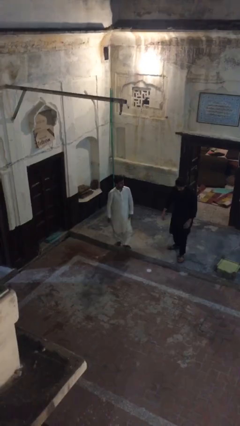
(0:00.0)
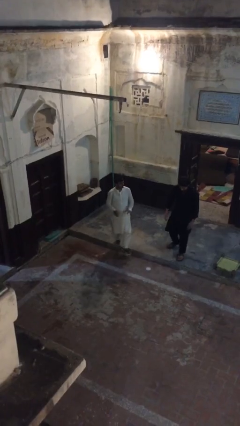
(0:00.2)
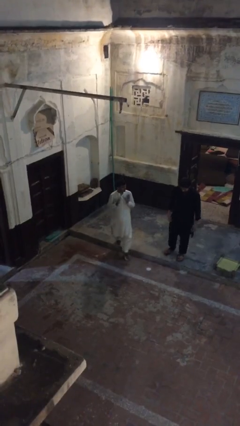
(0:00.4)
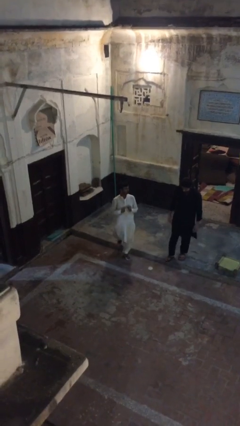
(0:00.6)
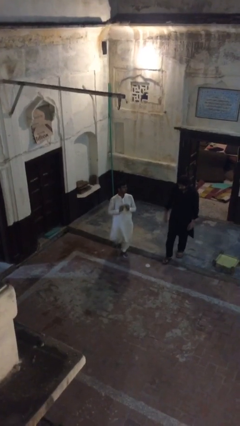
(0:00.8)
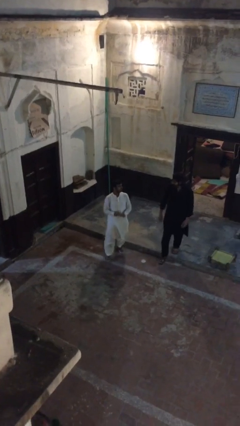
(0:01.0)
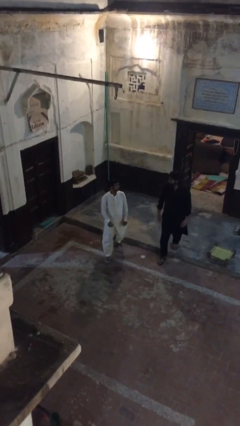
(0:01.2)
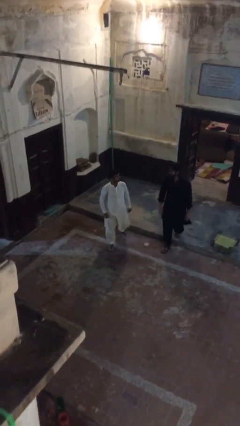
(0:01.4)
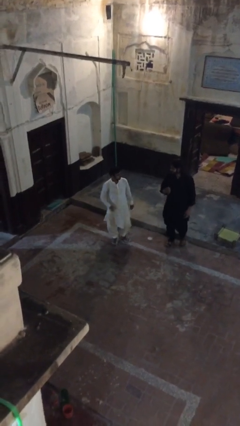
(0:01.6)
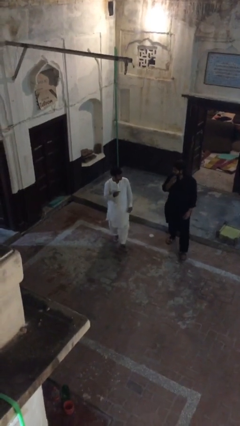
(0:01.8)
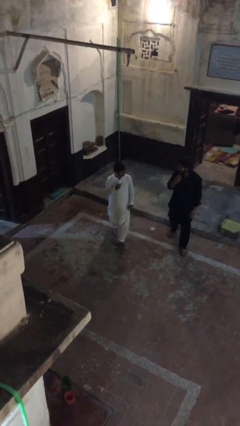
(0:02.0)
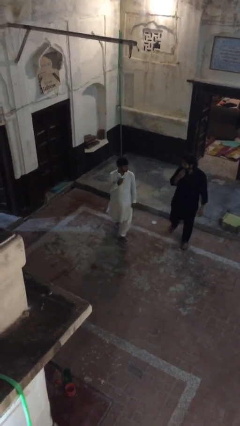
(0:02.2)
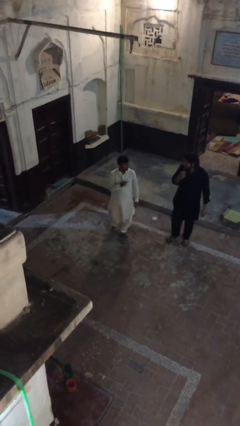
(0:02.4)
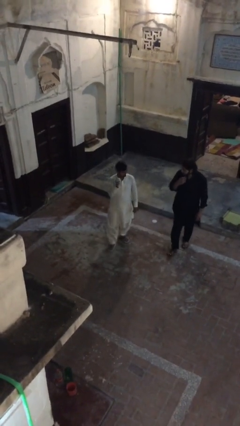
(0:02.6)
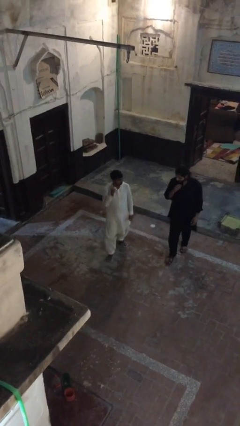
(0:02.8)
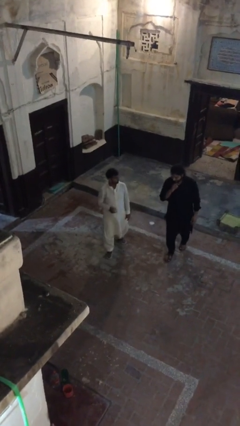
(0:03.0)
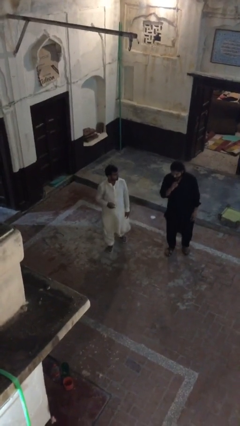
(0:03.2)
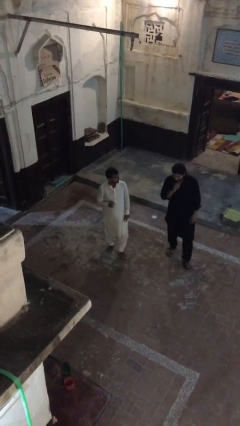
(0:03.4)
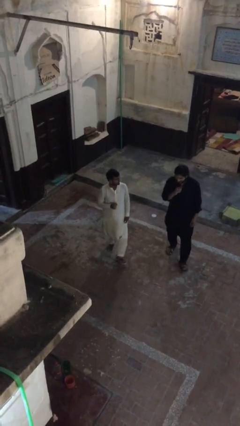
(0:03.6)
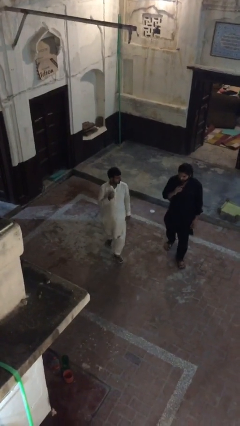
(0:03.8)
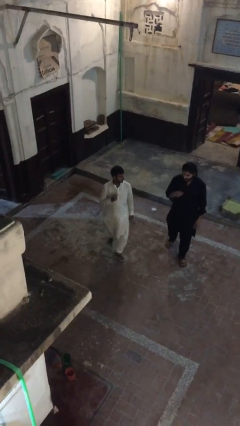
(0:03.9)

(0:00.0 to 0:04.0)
person talks to person

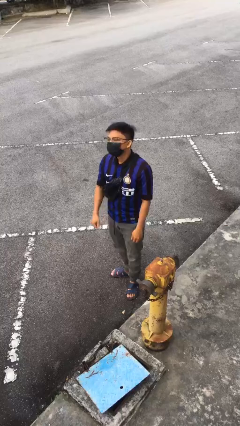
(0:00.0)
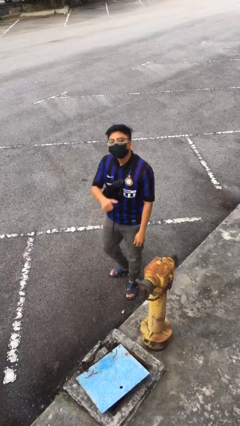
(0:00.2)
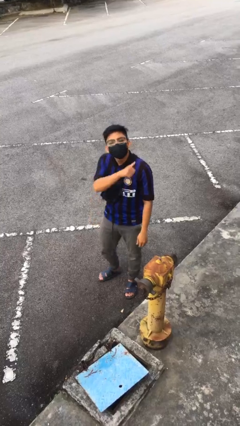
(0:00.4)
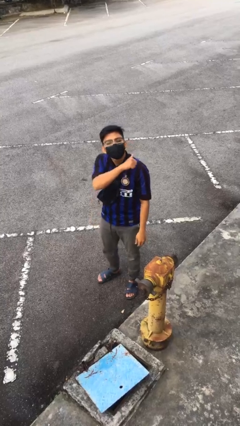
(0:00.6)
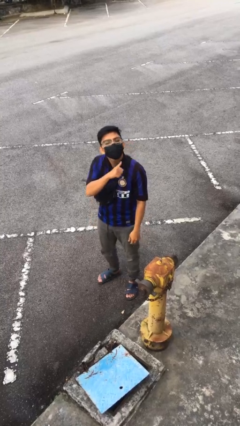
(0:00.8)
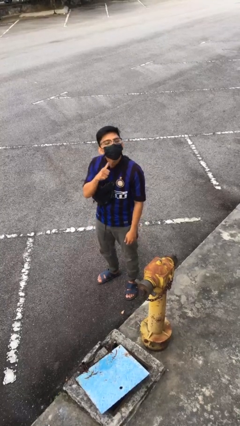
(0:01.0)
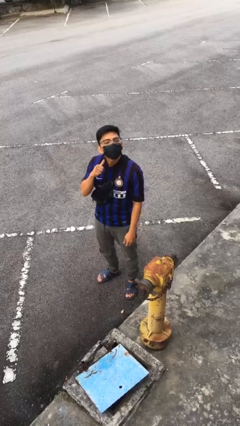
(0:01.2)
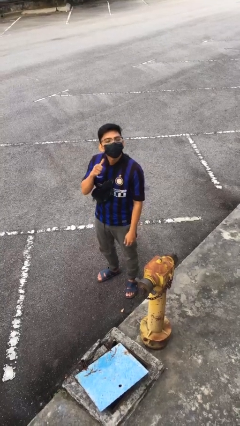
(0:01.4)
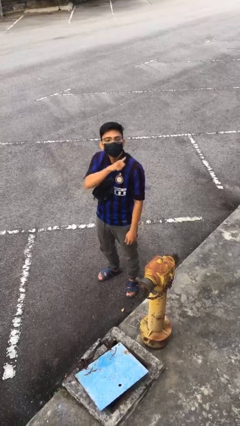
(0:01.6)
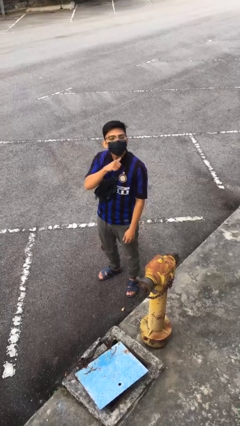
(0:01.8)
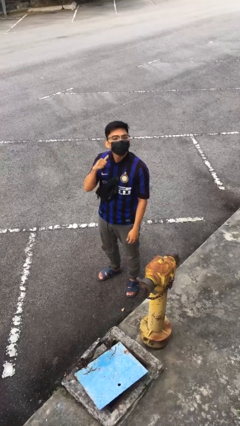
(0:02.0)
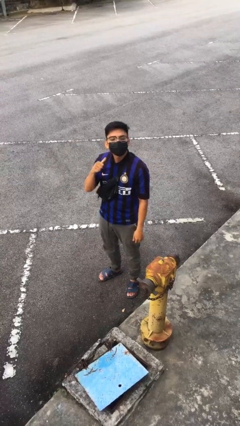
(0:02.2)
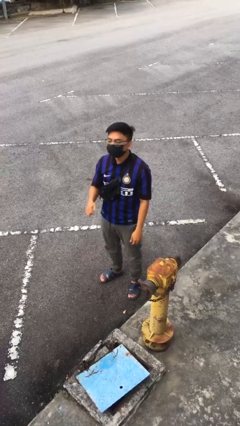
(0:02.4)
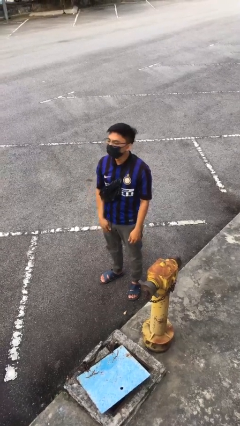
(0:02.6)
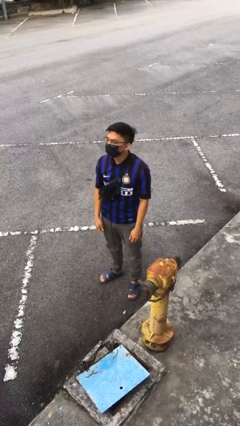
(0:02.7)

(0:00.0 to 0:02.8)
person gestures cut

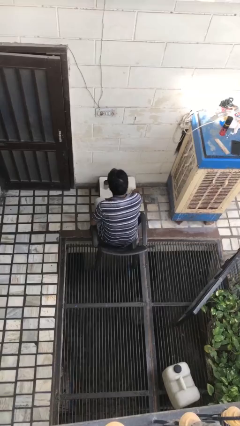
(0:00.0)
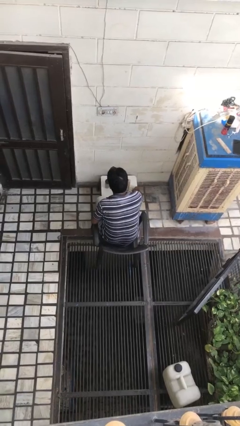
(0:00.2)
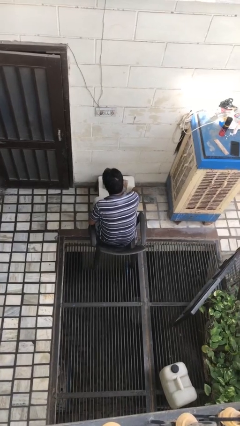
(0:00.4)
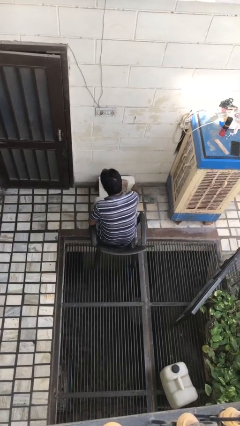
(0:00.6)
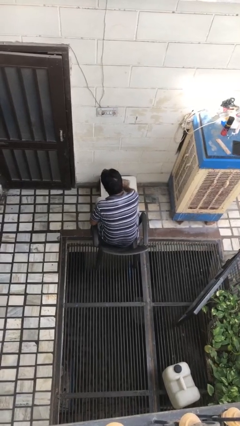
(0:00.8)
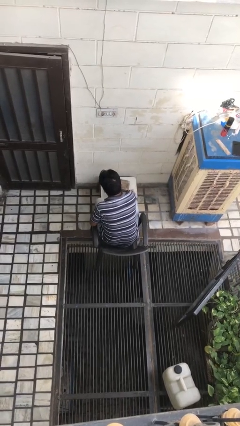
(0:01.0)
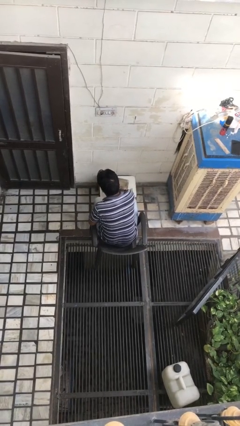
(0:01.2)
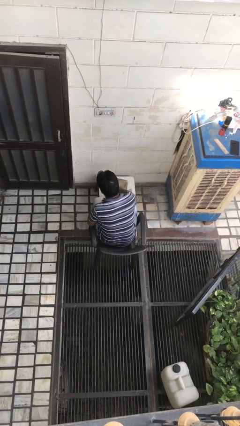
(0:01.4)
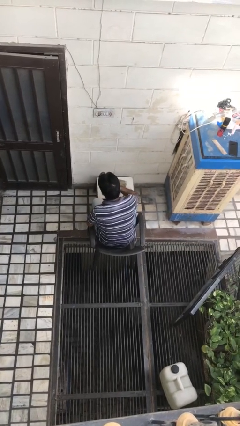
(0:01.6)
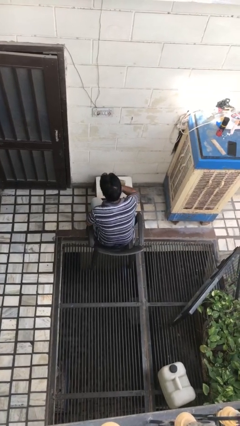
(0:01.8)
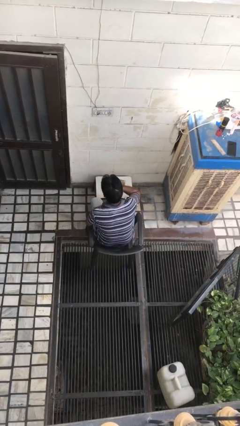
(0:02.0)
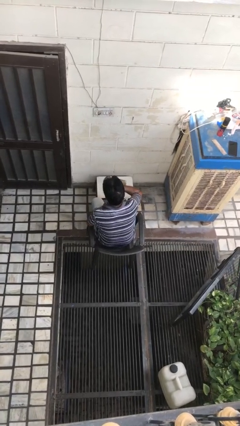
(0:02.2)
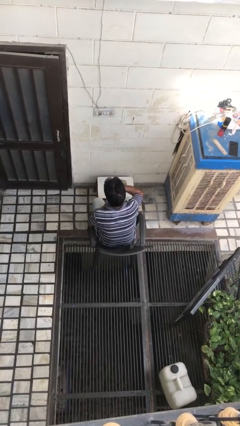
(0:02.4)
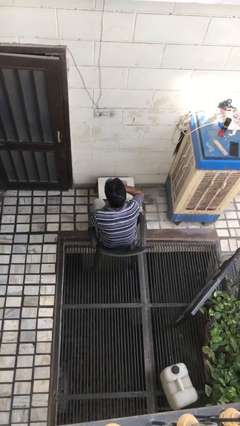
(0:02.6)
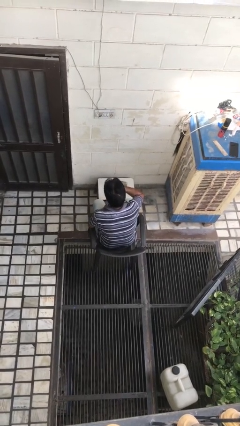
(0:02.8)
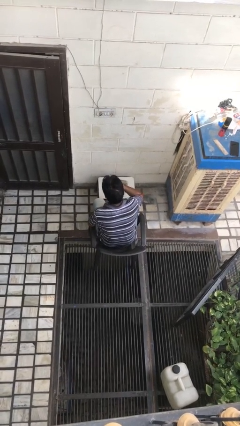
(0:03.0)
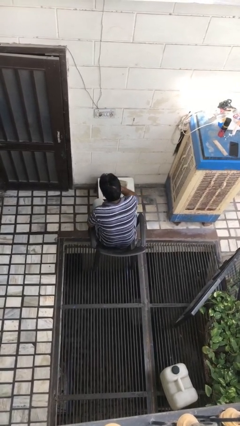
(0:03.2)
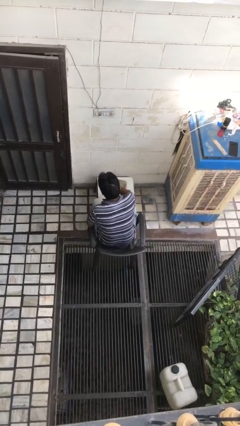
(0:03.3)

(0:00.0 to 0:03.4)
person drinks from cup

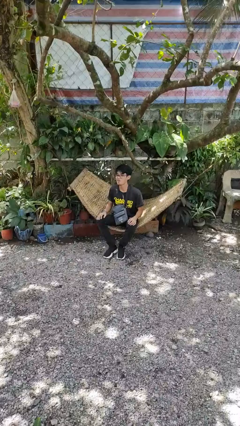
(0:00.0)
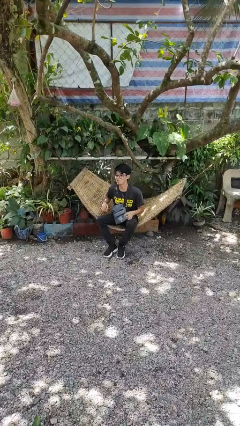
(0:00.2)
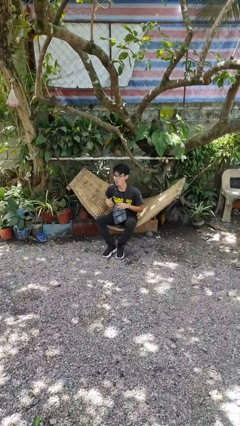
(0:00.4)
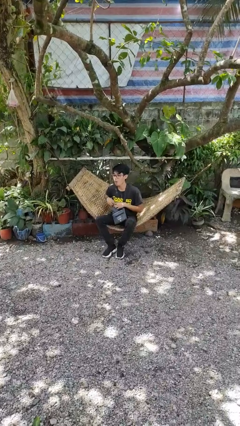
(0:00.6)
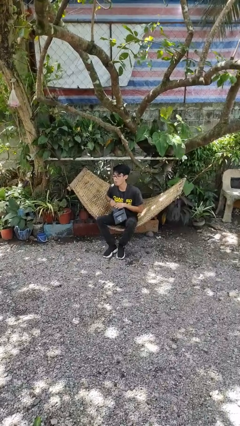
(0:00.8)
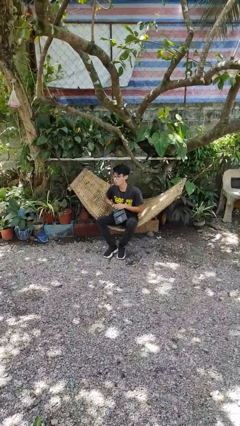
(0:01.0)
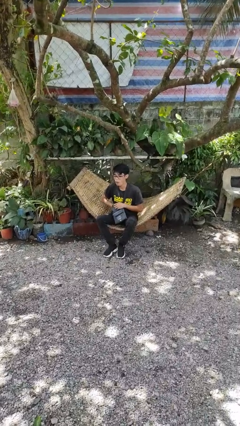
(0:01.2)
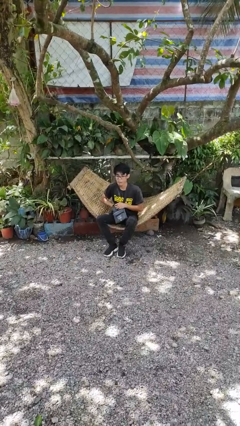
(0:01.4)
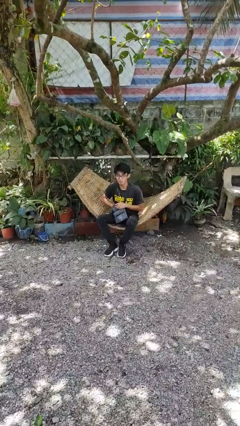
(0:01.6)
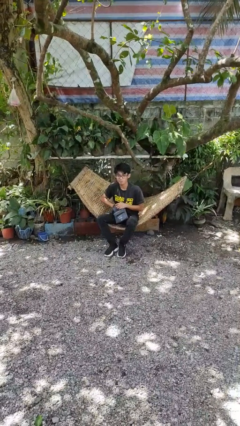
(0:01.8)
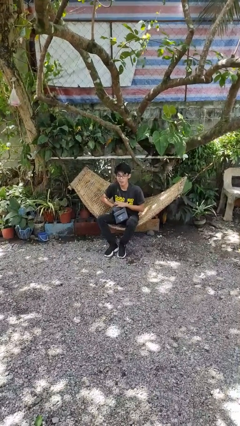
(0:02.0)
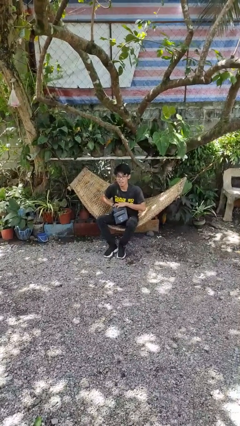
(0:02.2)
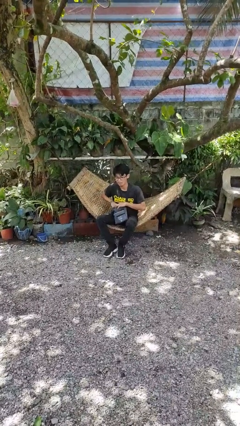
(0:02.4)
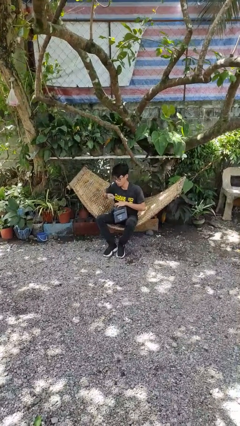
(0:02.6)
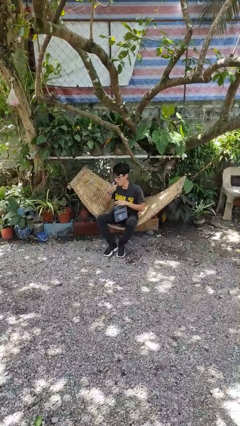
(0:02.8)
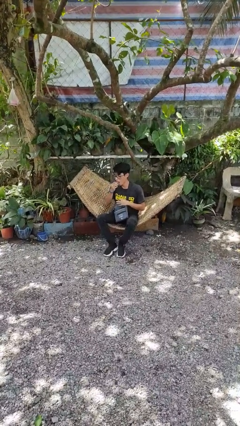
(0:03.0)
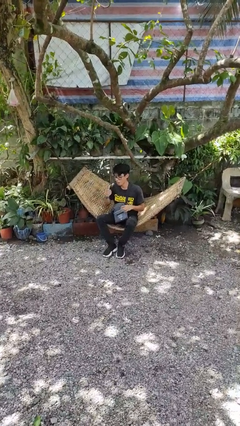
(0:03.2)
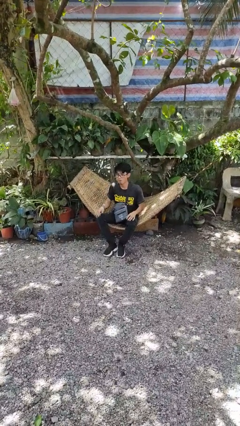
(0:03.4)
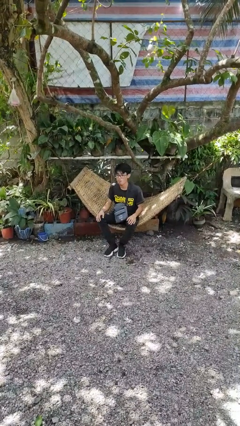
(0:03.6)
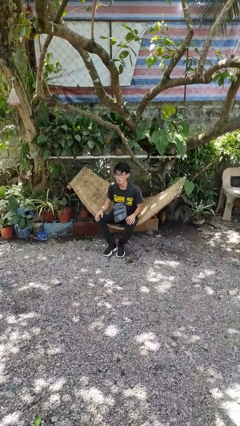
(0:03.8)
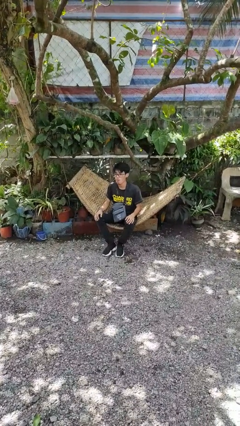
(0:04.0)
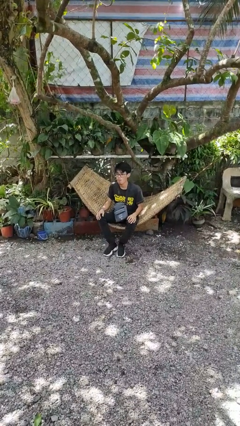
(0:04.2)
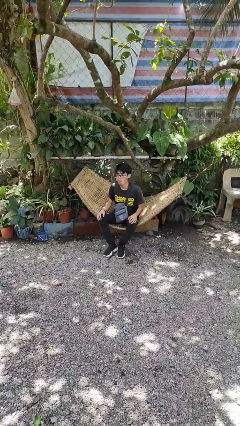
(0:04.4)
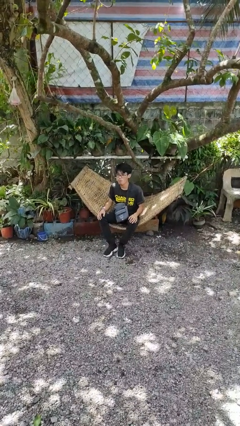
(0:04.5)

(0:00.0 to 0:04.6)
person eats snack from bag

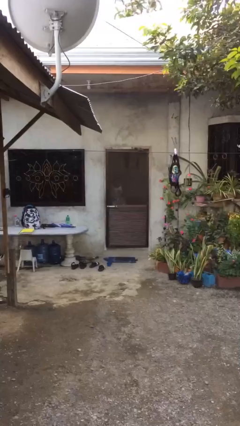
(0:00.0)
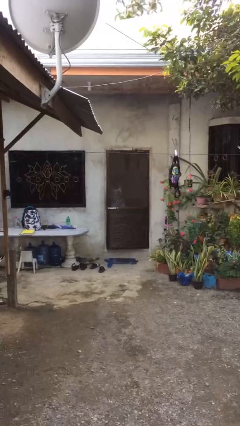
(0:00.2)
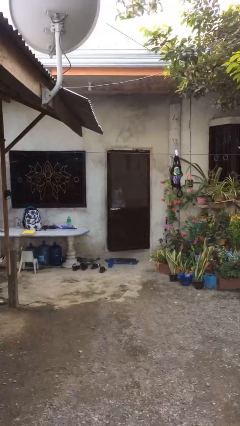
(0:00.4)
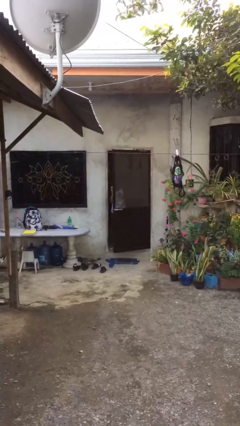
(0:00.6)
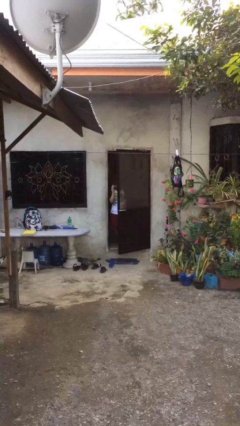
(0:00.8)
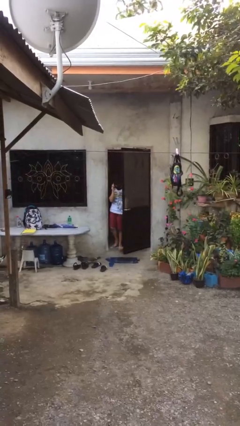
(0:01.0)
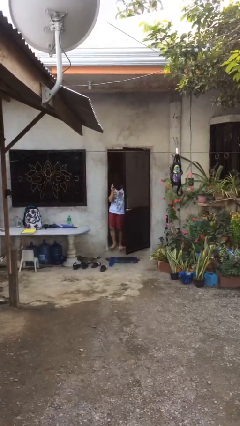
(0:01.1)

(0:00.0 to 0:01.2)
person opens facility door

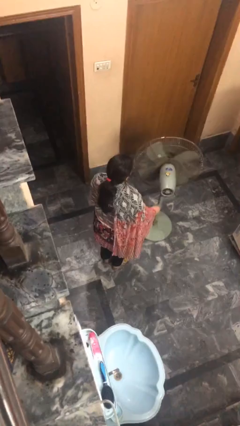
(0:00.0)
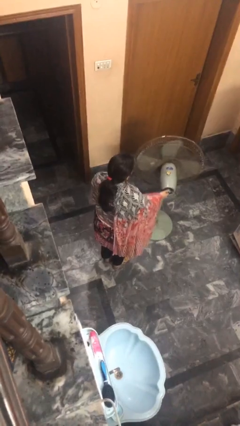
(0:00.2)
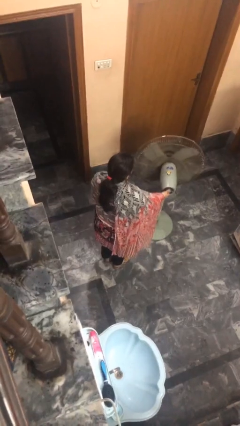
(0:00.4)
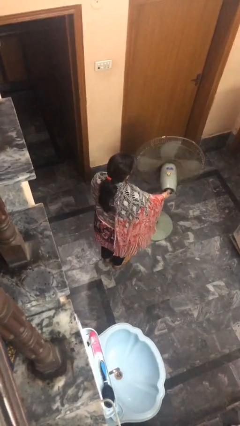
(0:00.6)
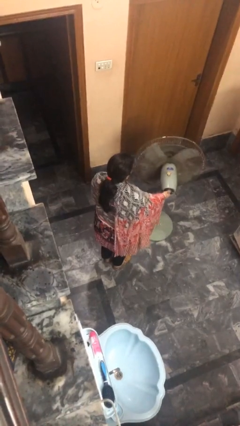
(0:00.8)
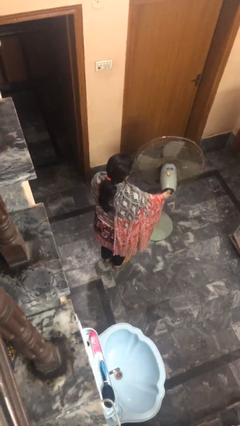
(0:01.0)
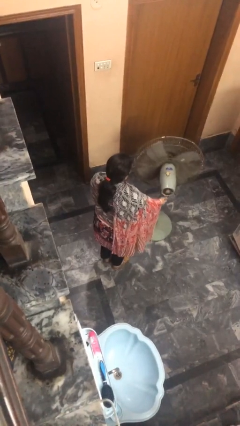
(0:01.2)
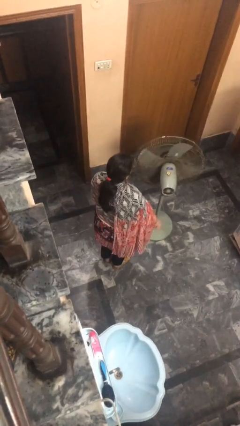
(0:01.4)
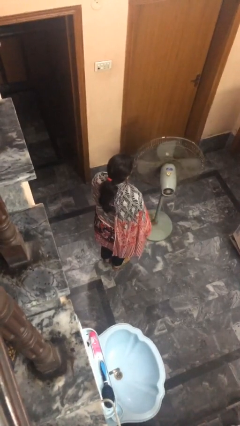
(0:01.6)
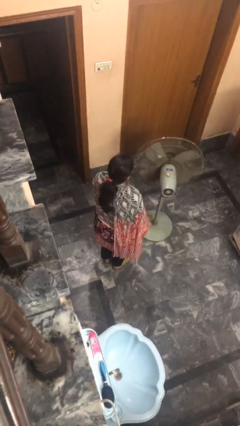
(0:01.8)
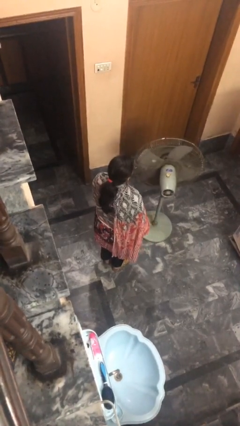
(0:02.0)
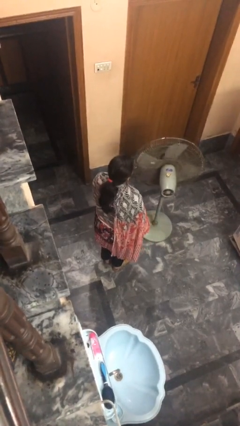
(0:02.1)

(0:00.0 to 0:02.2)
person turns off fan
